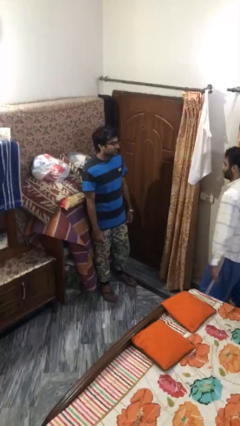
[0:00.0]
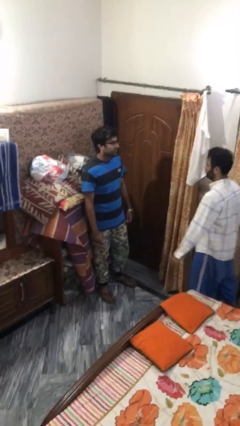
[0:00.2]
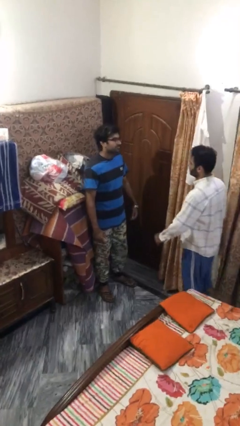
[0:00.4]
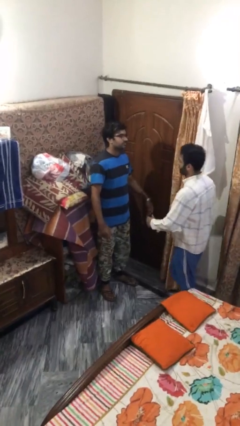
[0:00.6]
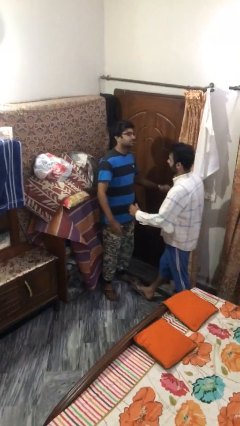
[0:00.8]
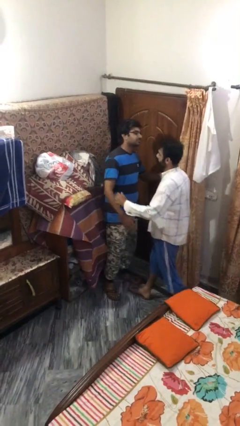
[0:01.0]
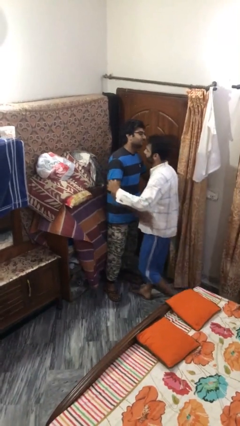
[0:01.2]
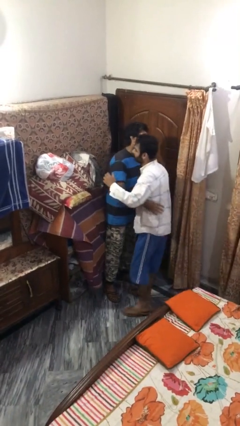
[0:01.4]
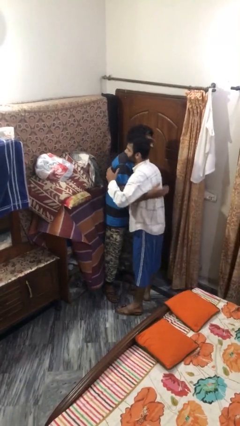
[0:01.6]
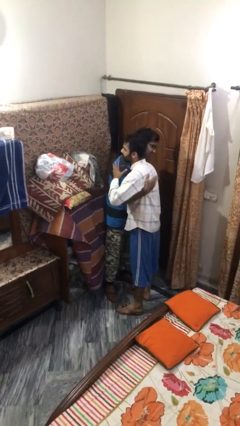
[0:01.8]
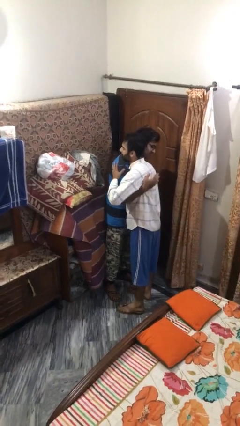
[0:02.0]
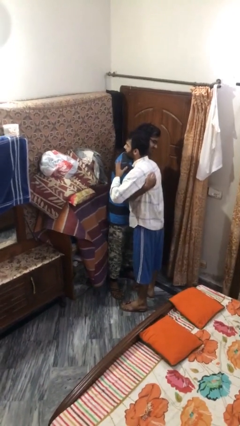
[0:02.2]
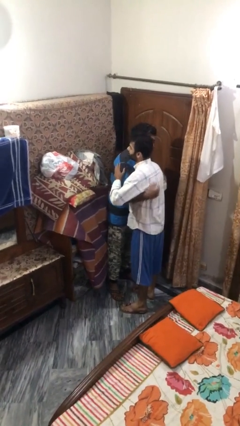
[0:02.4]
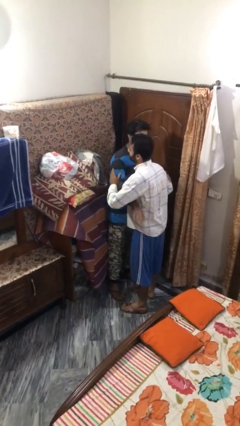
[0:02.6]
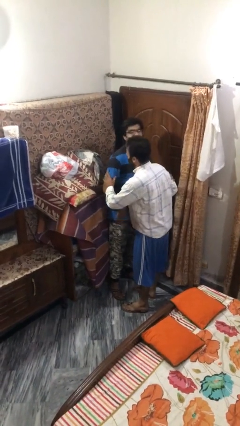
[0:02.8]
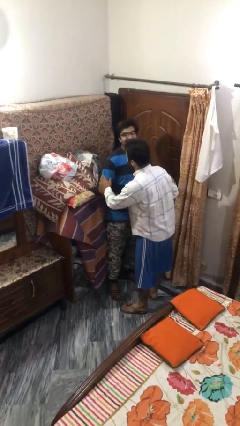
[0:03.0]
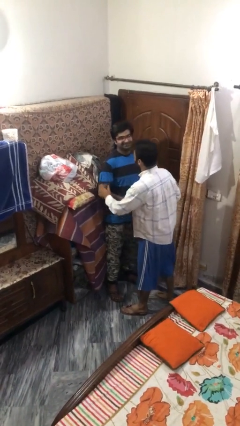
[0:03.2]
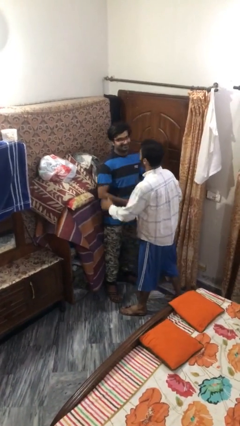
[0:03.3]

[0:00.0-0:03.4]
person embraces person

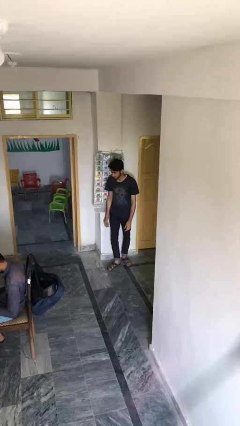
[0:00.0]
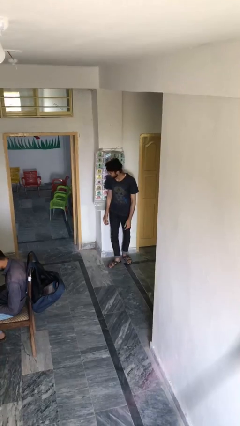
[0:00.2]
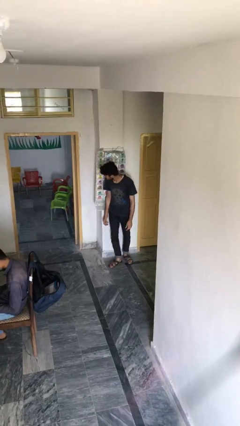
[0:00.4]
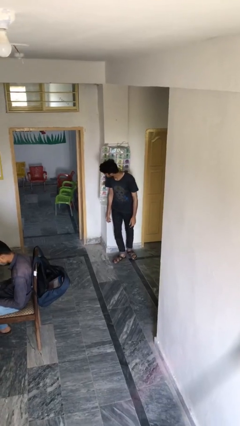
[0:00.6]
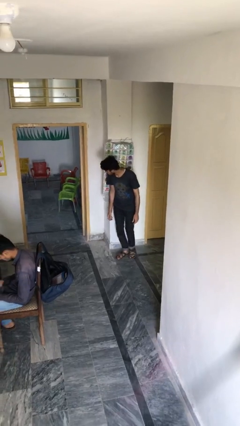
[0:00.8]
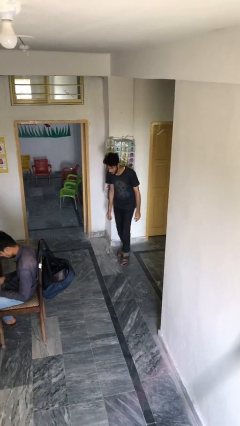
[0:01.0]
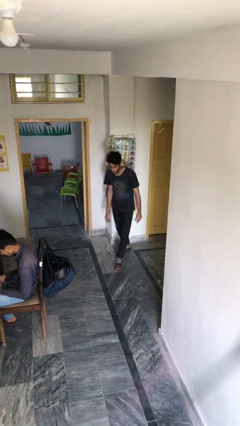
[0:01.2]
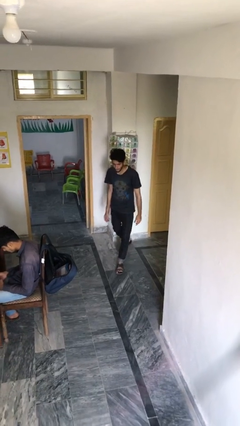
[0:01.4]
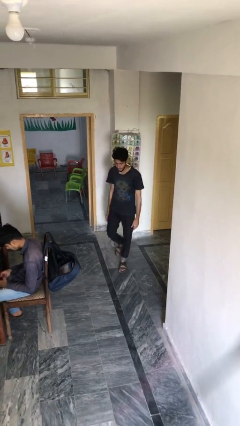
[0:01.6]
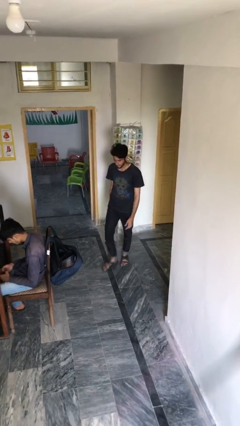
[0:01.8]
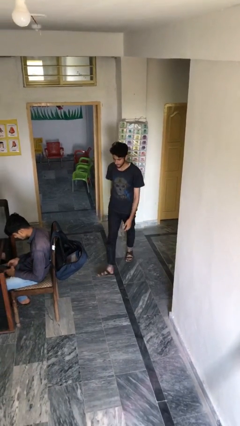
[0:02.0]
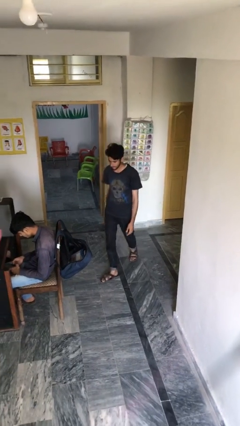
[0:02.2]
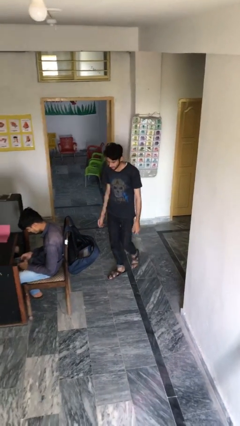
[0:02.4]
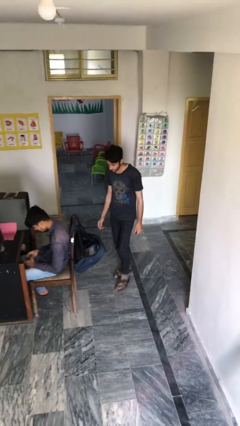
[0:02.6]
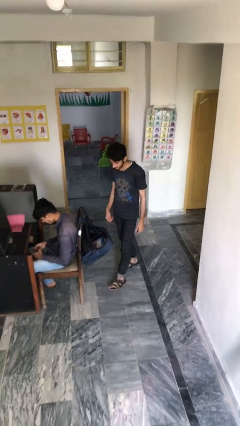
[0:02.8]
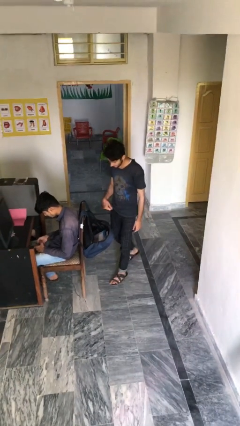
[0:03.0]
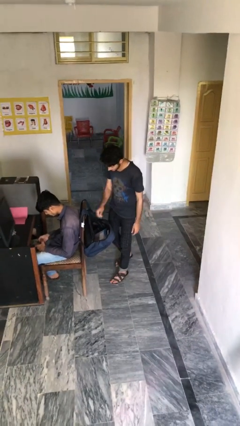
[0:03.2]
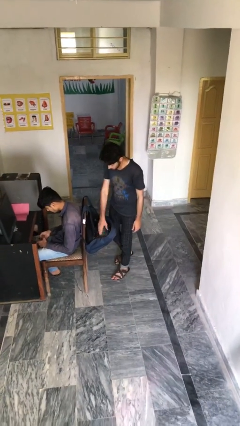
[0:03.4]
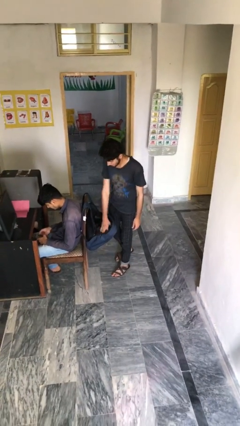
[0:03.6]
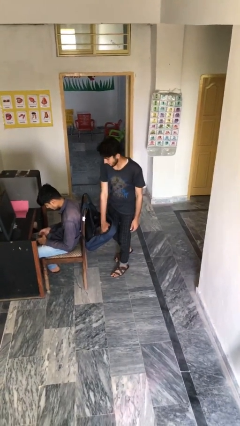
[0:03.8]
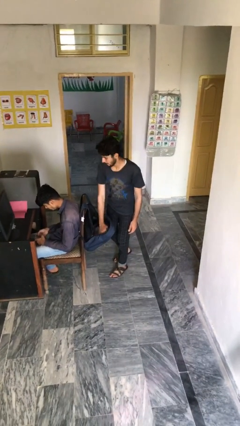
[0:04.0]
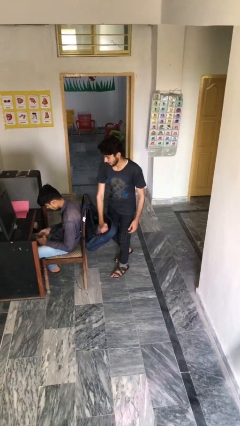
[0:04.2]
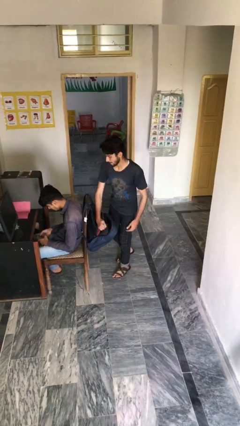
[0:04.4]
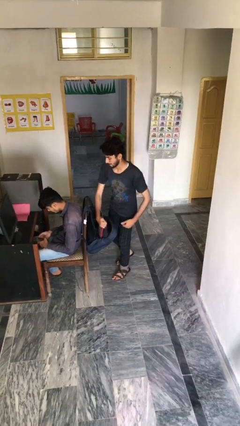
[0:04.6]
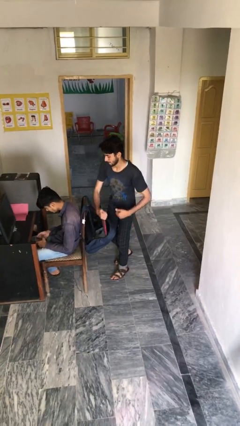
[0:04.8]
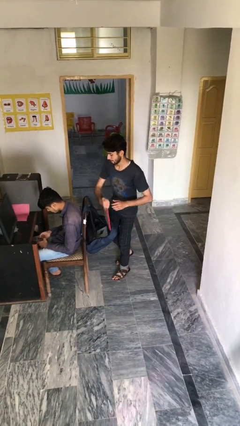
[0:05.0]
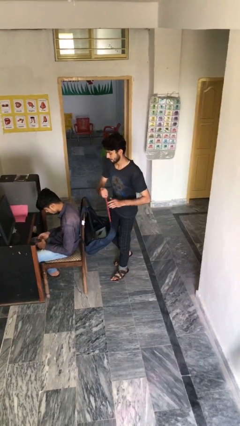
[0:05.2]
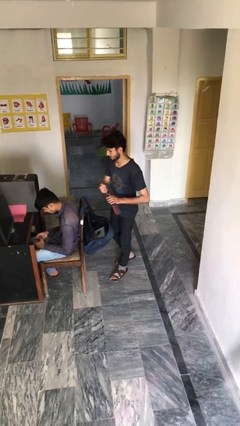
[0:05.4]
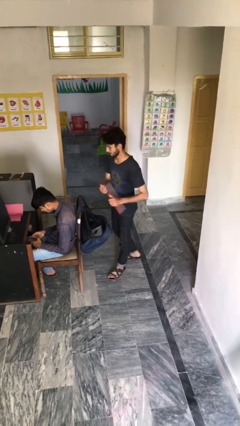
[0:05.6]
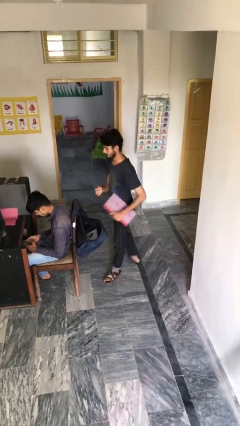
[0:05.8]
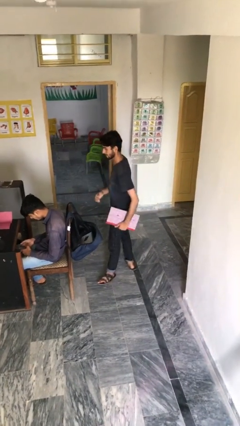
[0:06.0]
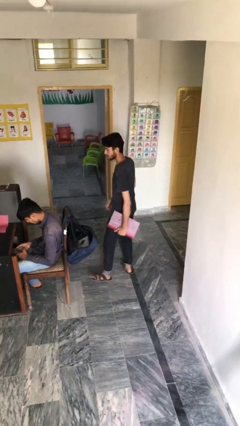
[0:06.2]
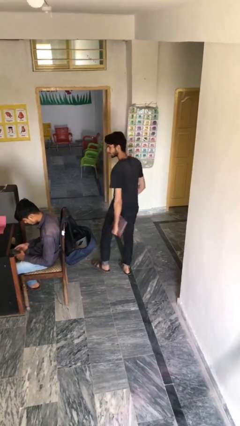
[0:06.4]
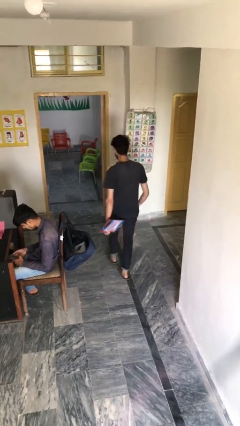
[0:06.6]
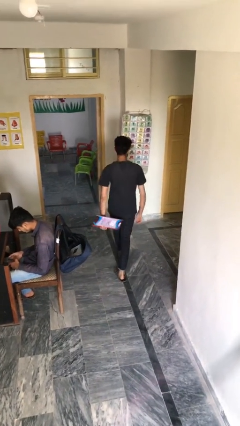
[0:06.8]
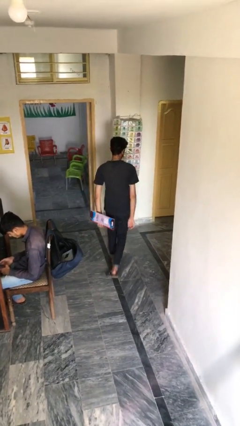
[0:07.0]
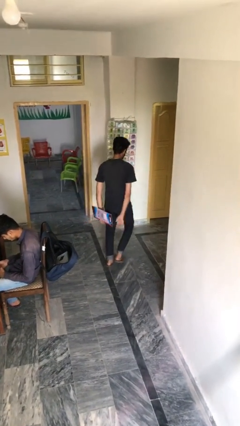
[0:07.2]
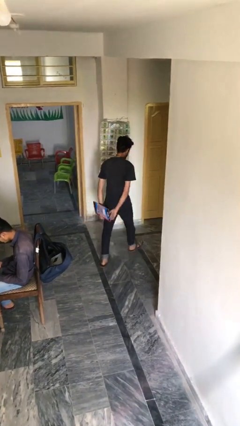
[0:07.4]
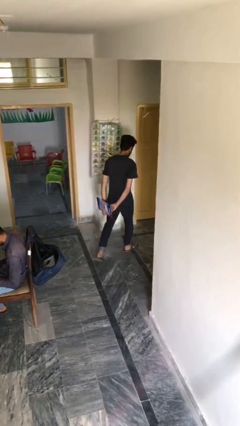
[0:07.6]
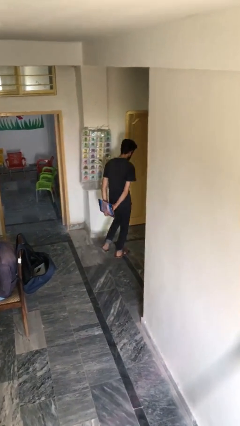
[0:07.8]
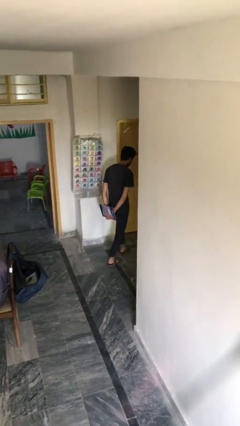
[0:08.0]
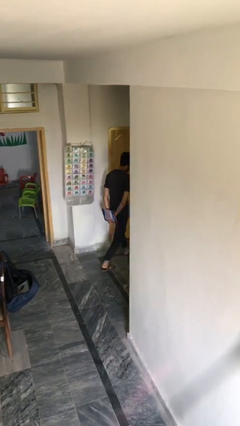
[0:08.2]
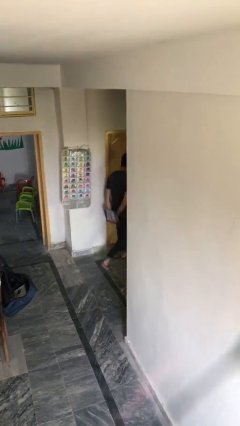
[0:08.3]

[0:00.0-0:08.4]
person steals object from person

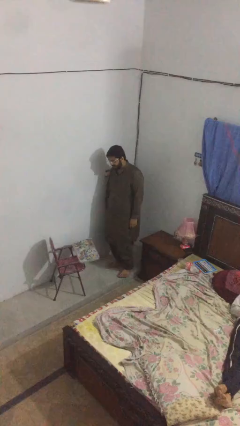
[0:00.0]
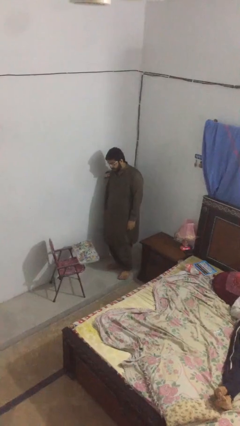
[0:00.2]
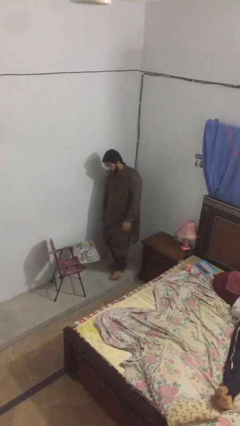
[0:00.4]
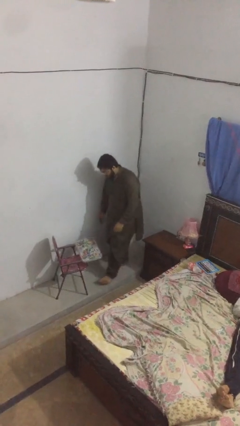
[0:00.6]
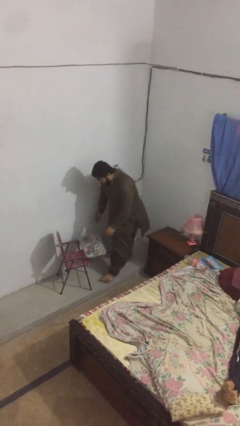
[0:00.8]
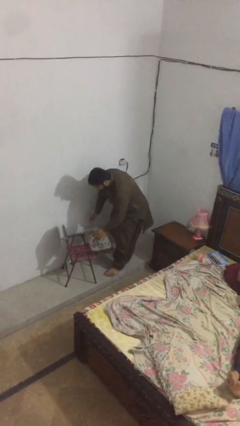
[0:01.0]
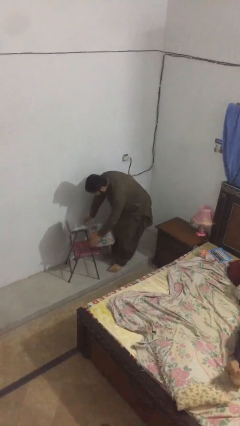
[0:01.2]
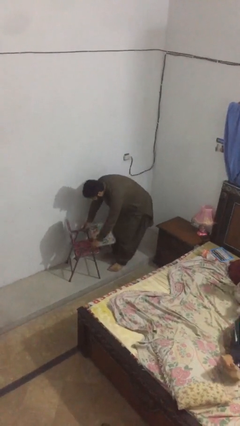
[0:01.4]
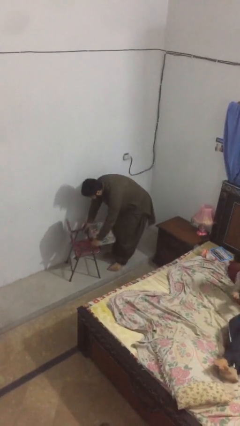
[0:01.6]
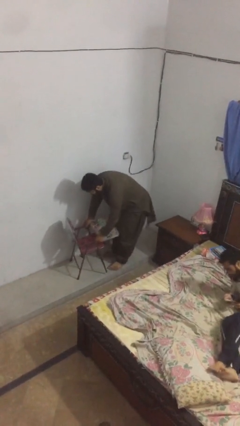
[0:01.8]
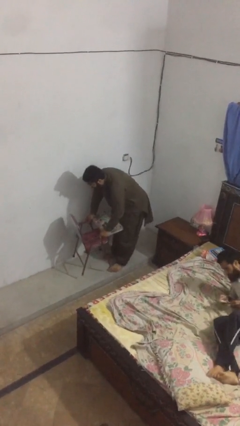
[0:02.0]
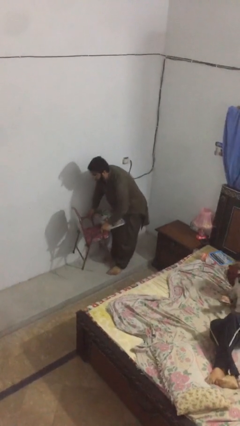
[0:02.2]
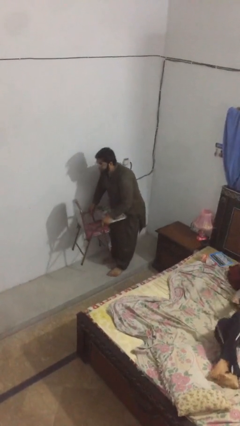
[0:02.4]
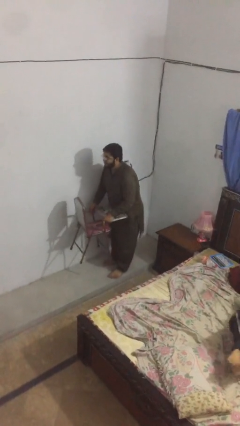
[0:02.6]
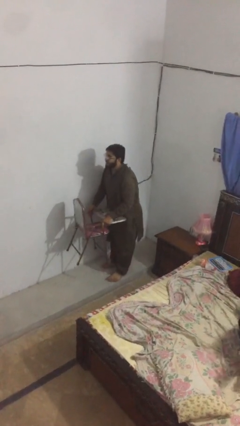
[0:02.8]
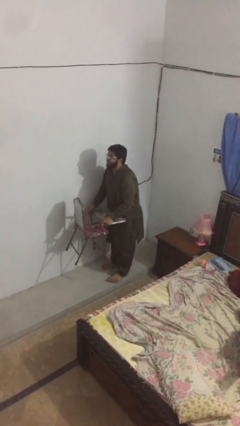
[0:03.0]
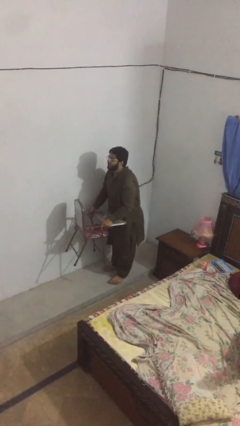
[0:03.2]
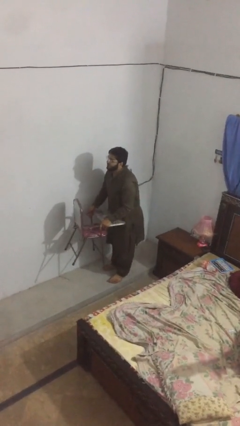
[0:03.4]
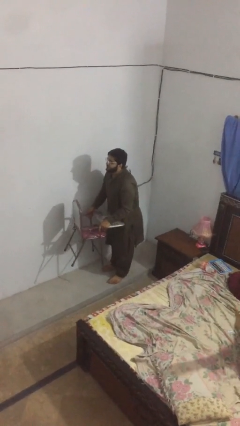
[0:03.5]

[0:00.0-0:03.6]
person picks up object from floor

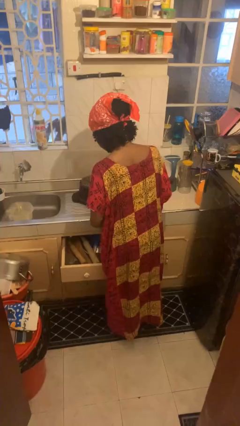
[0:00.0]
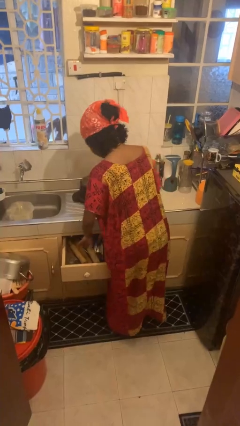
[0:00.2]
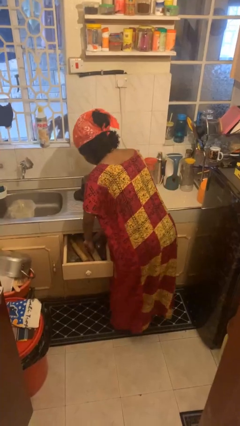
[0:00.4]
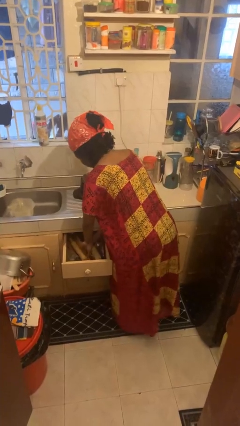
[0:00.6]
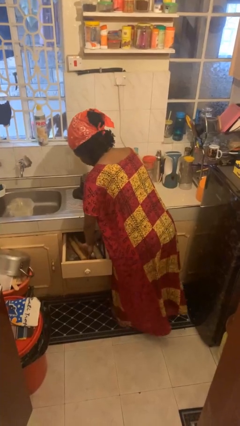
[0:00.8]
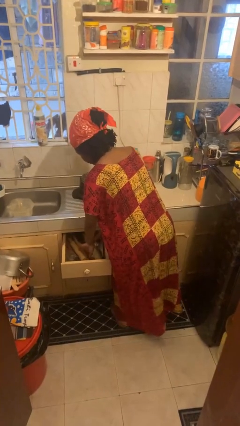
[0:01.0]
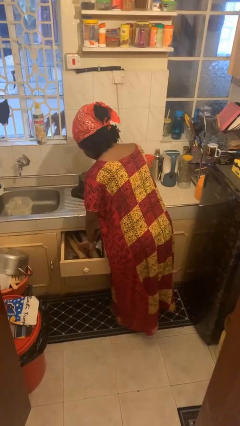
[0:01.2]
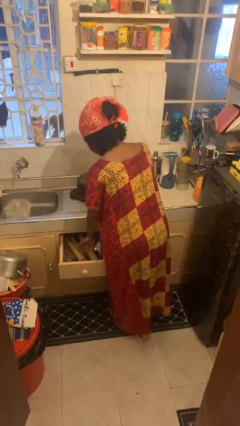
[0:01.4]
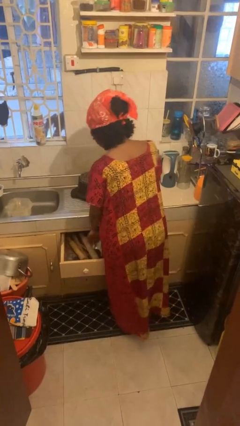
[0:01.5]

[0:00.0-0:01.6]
person searches in kitchen drawer

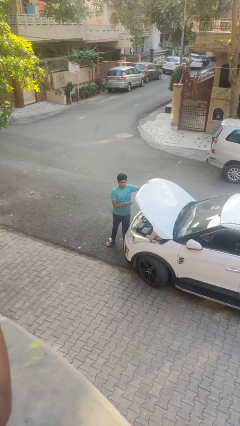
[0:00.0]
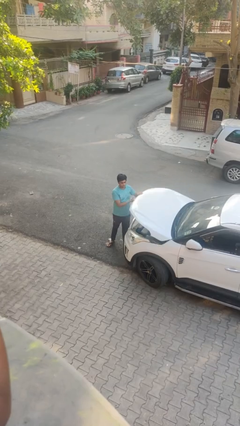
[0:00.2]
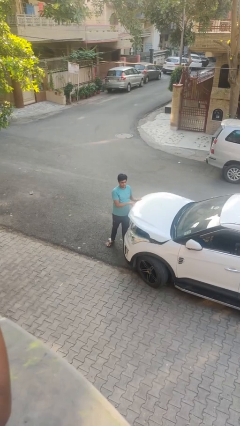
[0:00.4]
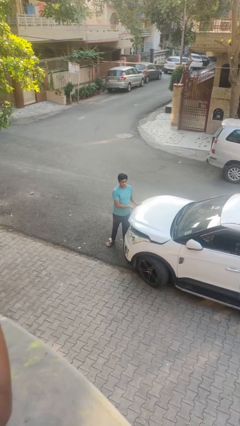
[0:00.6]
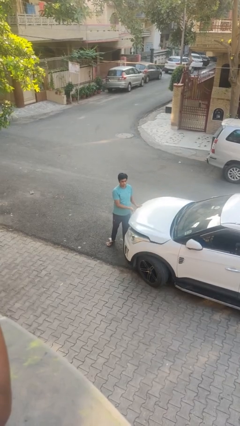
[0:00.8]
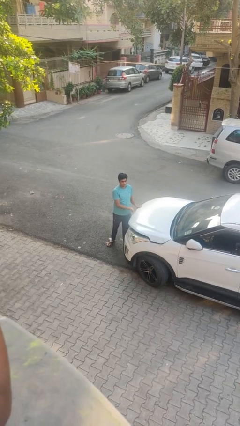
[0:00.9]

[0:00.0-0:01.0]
person closes car hood
